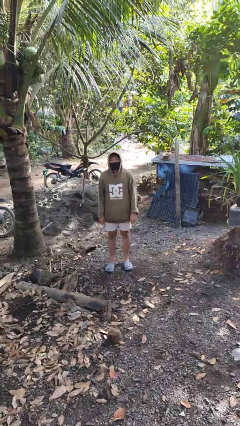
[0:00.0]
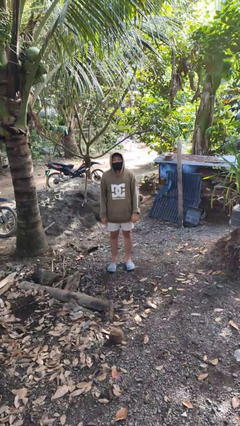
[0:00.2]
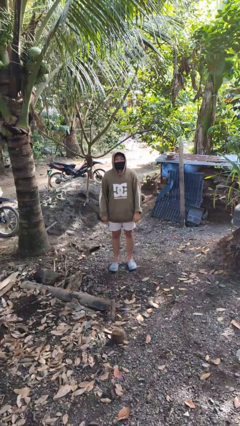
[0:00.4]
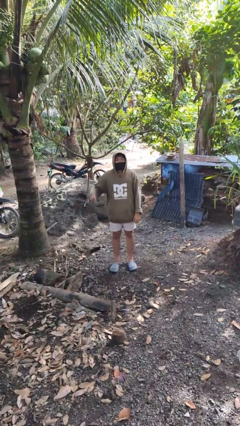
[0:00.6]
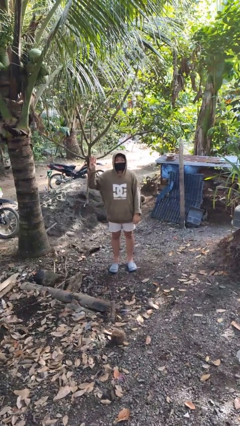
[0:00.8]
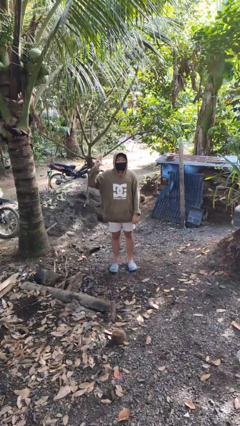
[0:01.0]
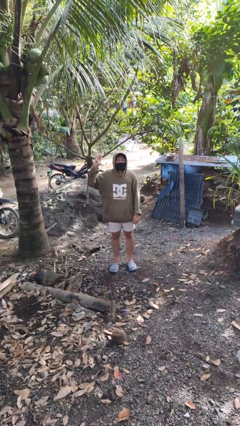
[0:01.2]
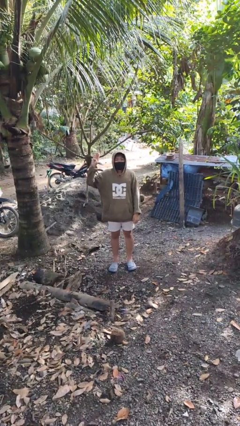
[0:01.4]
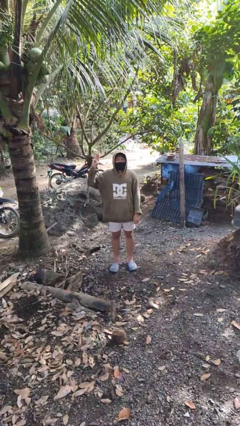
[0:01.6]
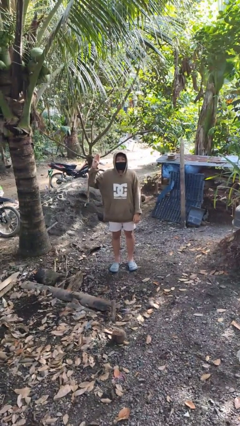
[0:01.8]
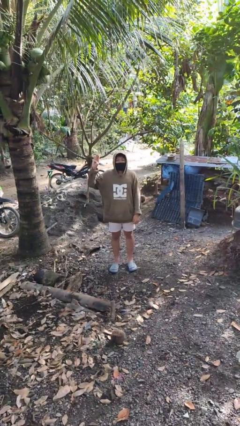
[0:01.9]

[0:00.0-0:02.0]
person gestures number four

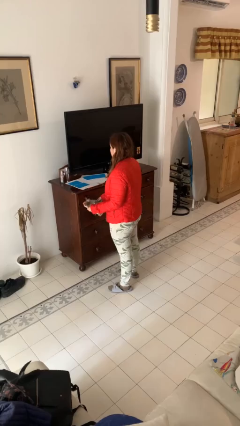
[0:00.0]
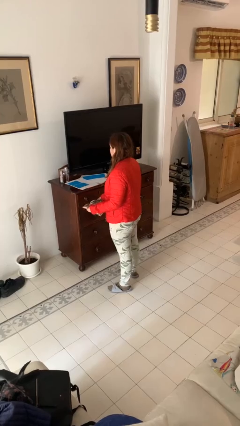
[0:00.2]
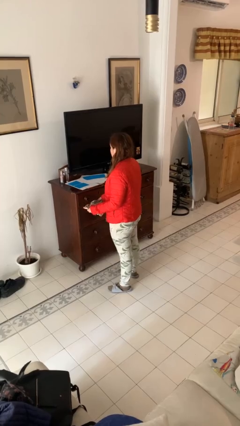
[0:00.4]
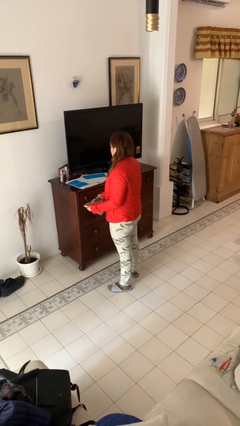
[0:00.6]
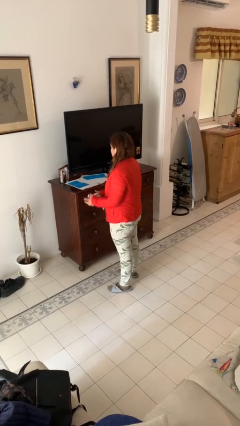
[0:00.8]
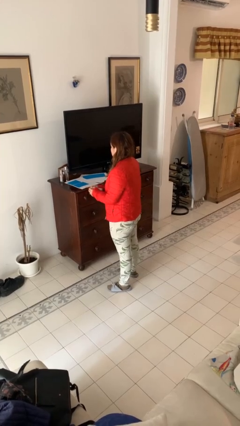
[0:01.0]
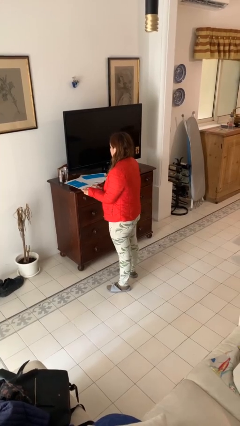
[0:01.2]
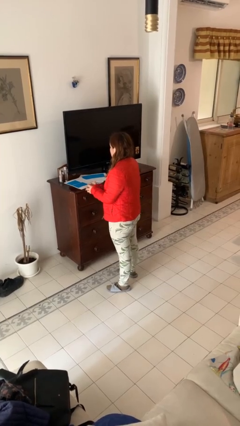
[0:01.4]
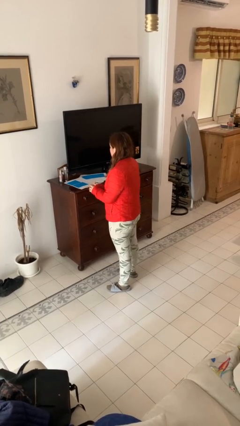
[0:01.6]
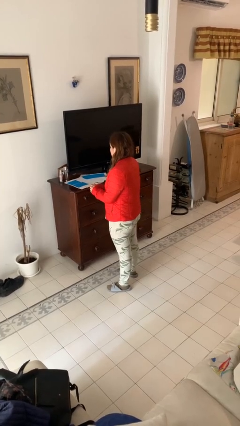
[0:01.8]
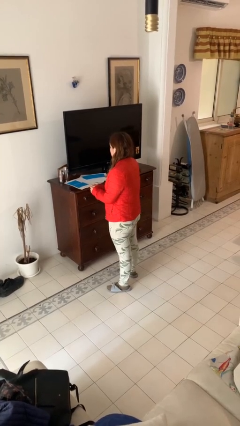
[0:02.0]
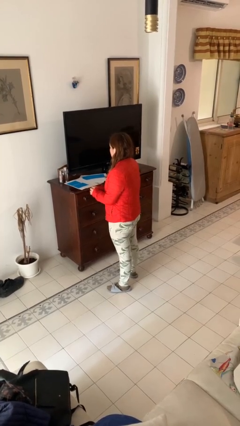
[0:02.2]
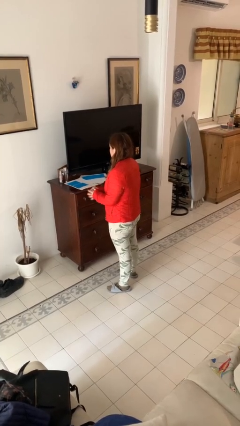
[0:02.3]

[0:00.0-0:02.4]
person crumples paper
